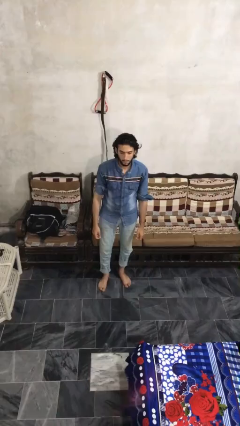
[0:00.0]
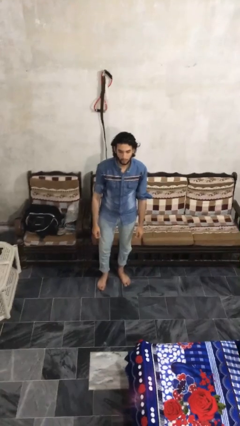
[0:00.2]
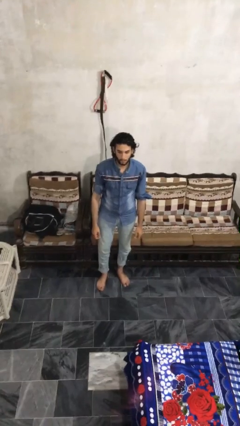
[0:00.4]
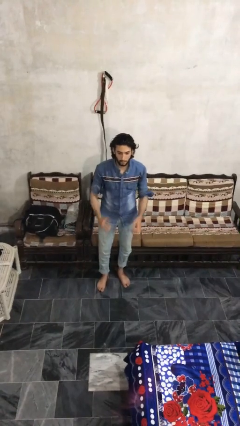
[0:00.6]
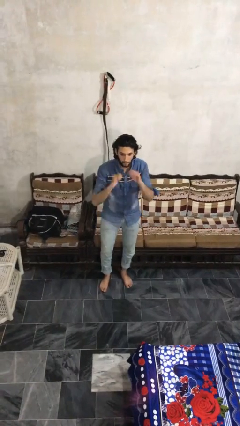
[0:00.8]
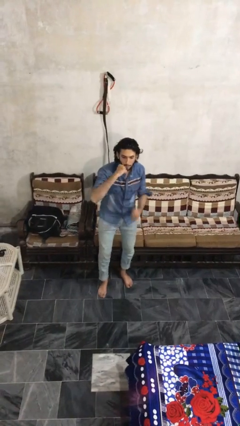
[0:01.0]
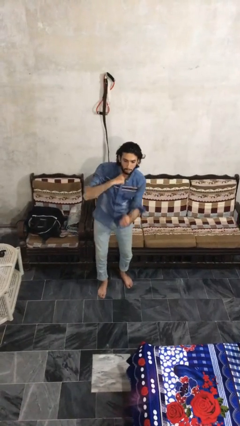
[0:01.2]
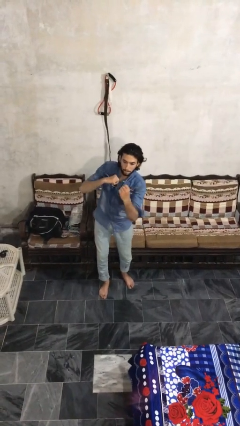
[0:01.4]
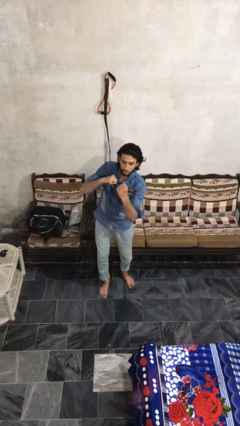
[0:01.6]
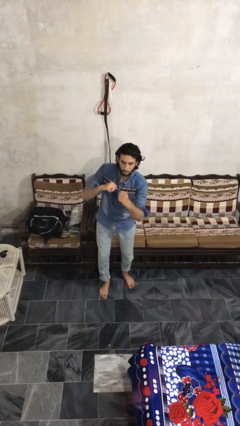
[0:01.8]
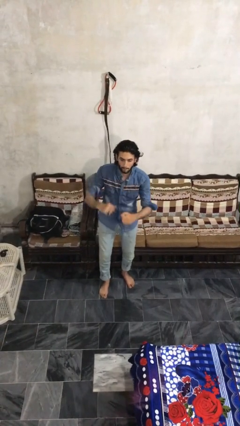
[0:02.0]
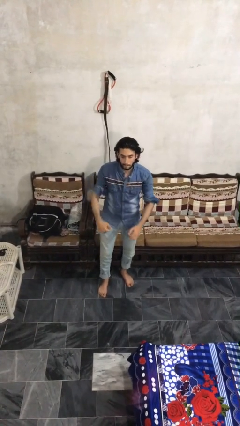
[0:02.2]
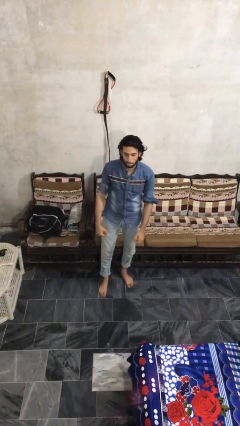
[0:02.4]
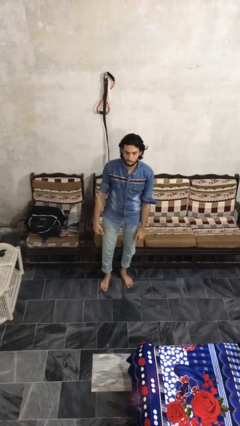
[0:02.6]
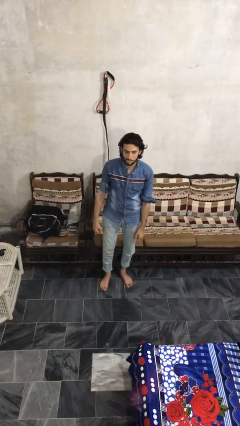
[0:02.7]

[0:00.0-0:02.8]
person punches

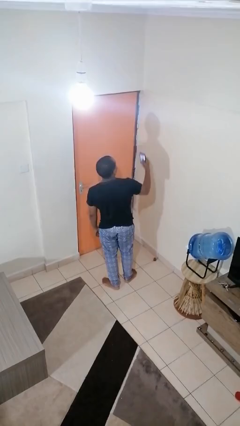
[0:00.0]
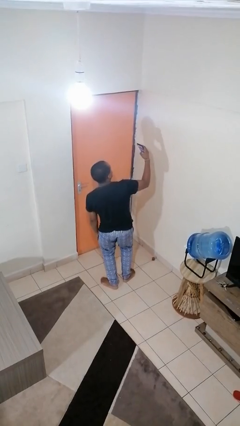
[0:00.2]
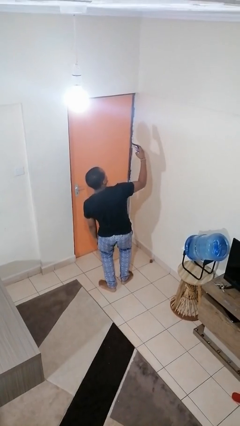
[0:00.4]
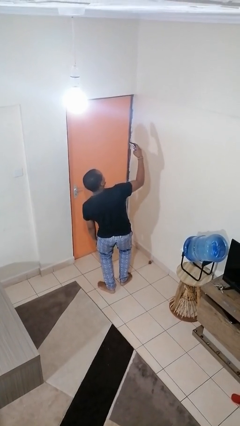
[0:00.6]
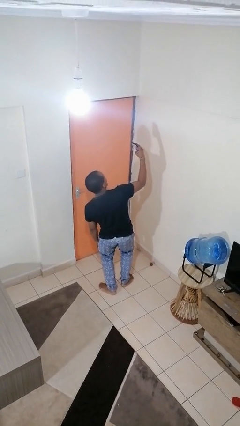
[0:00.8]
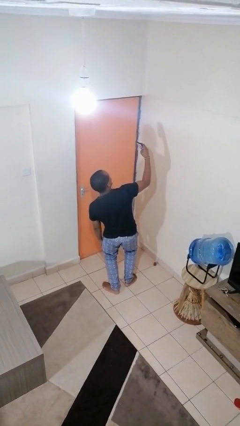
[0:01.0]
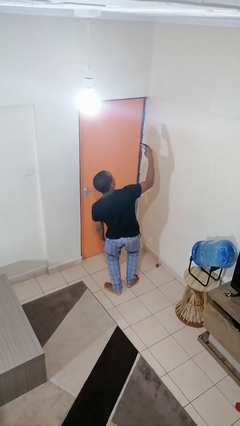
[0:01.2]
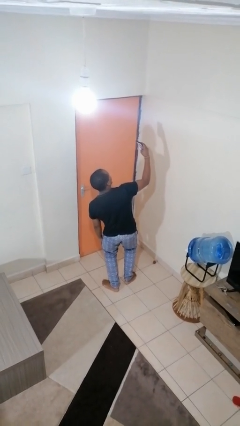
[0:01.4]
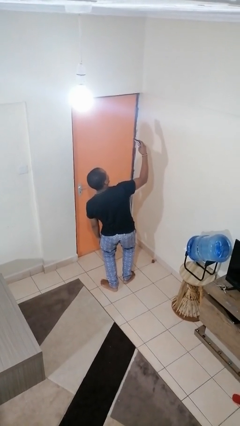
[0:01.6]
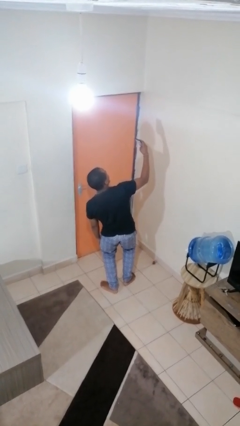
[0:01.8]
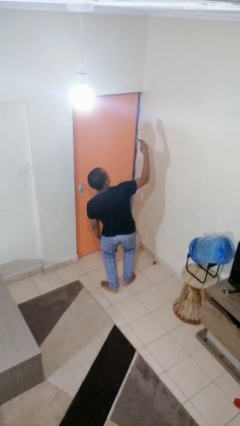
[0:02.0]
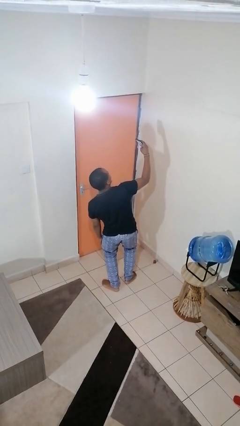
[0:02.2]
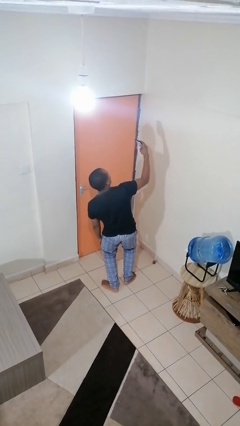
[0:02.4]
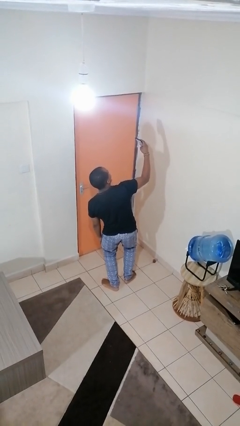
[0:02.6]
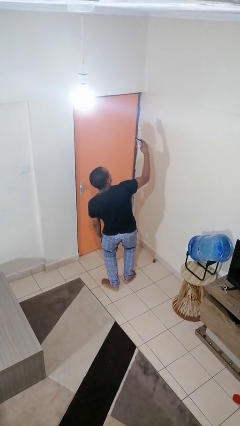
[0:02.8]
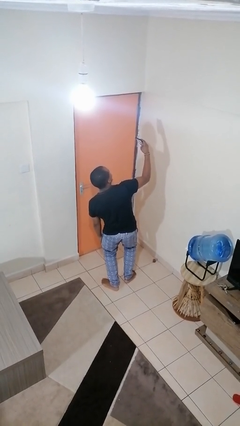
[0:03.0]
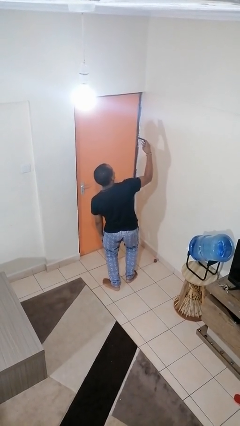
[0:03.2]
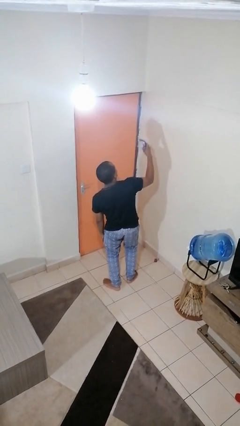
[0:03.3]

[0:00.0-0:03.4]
person takes selfie

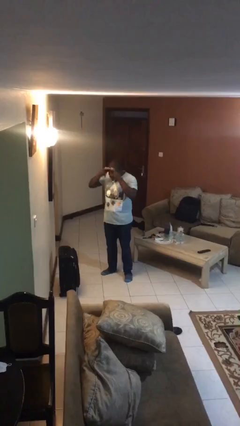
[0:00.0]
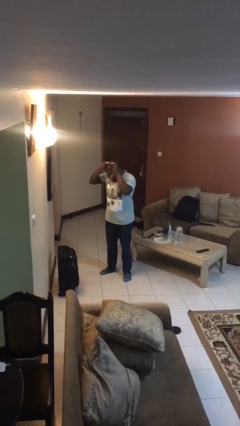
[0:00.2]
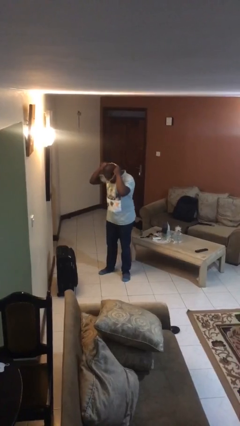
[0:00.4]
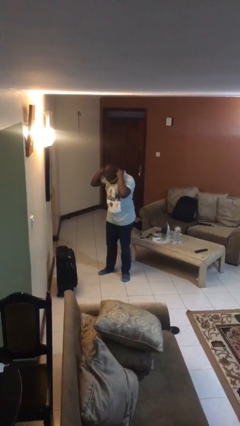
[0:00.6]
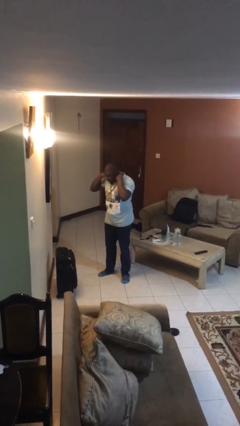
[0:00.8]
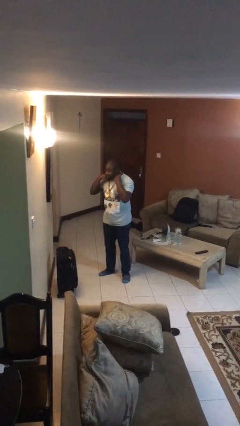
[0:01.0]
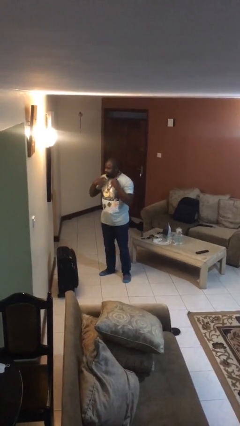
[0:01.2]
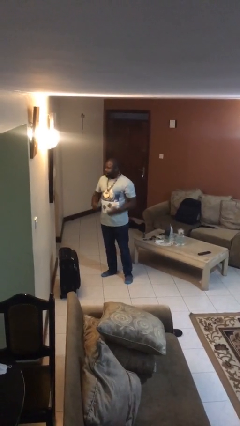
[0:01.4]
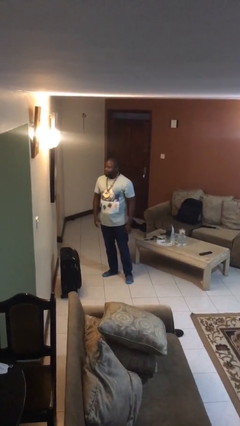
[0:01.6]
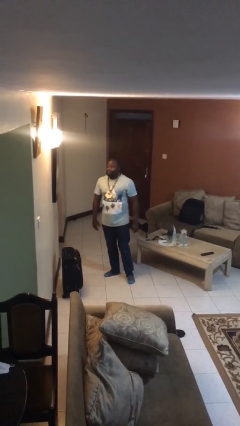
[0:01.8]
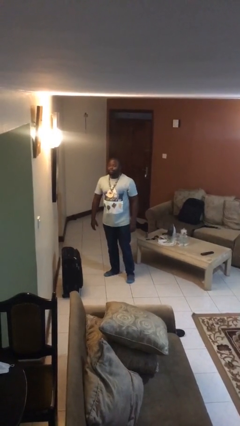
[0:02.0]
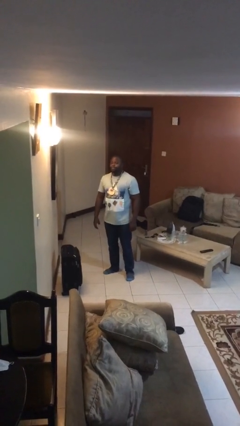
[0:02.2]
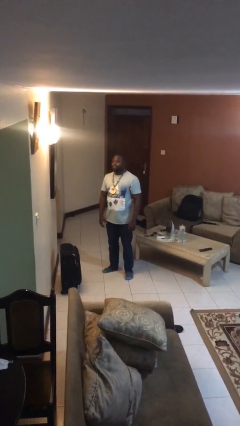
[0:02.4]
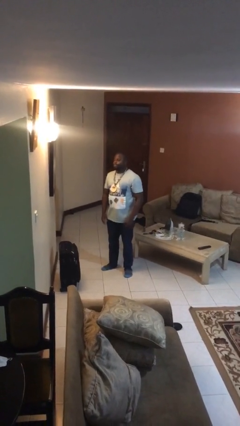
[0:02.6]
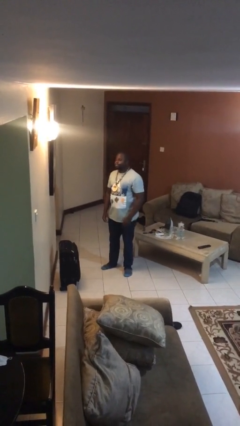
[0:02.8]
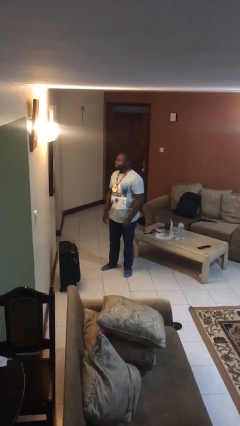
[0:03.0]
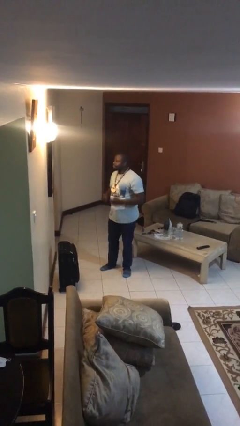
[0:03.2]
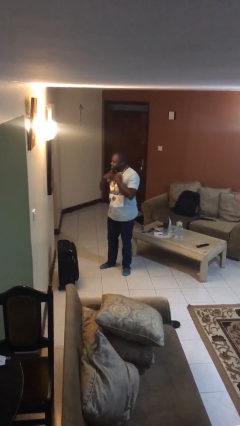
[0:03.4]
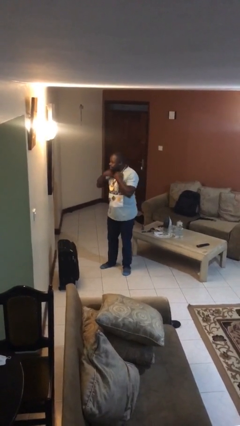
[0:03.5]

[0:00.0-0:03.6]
person puts on necklace

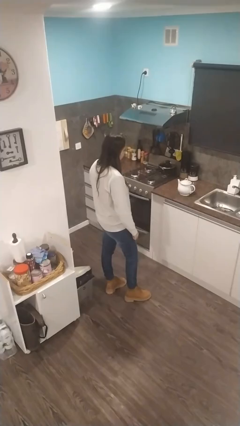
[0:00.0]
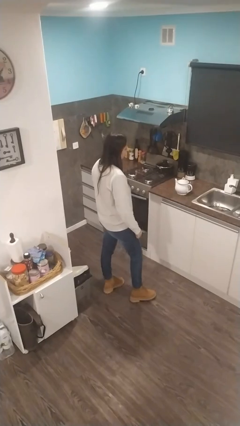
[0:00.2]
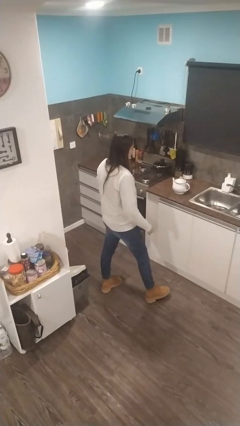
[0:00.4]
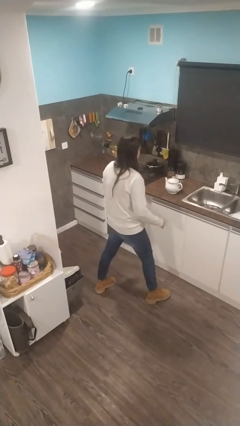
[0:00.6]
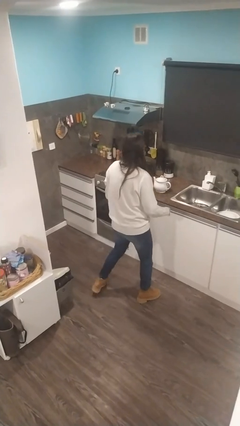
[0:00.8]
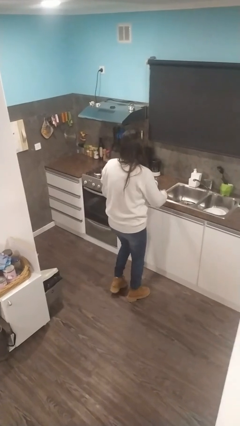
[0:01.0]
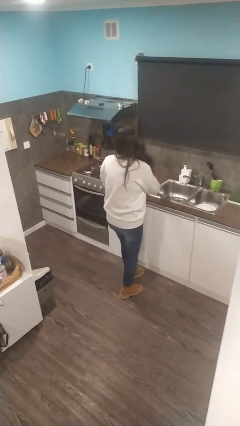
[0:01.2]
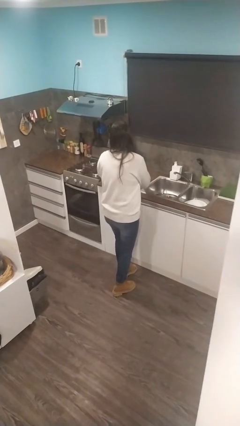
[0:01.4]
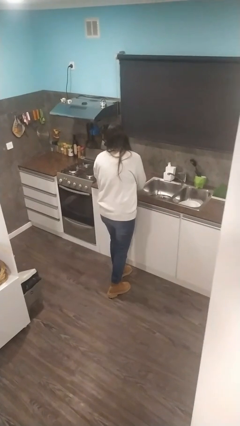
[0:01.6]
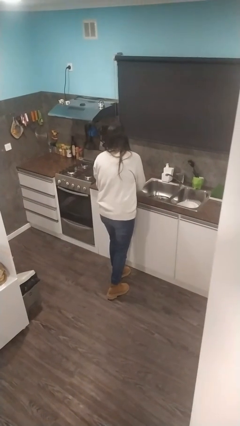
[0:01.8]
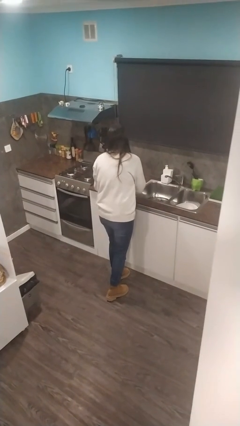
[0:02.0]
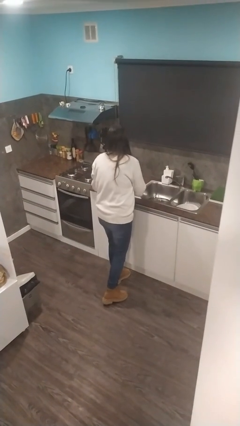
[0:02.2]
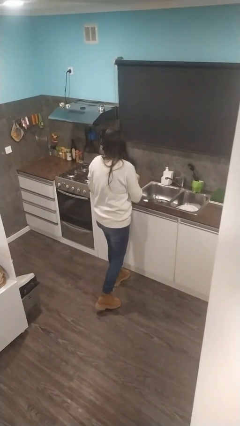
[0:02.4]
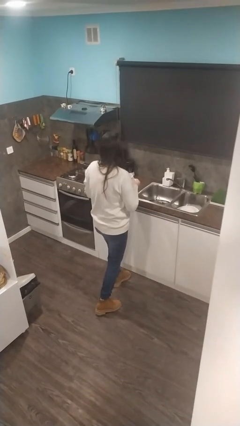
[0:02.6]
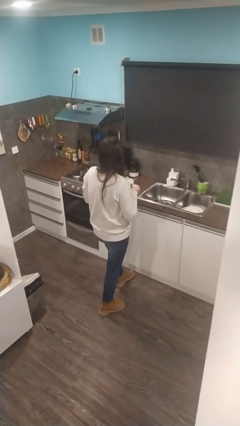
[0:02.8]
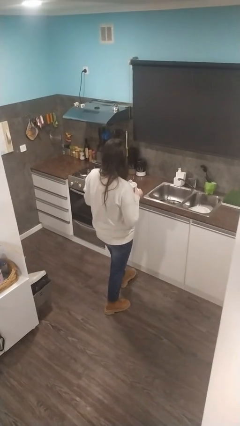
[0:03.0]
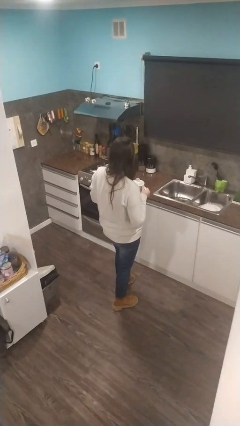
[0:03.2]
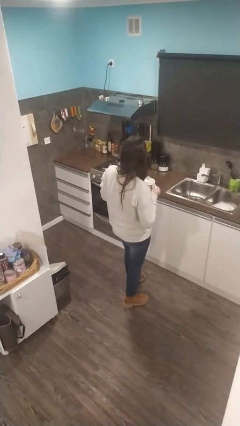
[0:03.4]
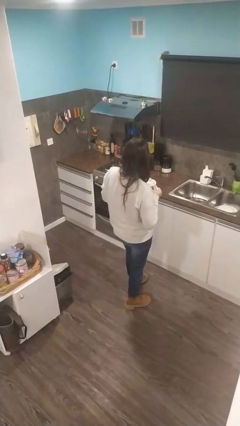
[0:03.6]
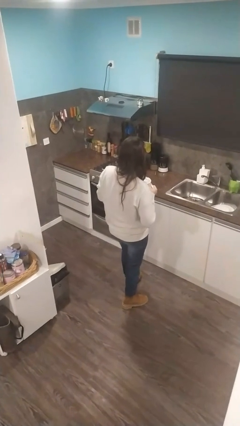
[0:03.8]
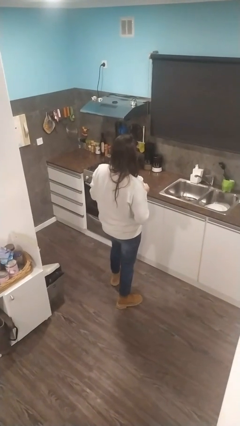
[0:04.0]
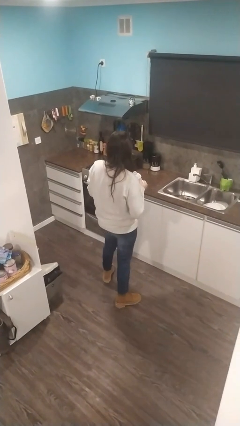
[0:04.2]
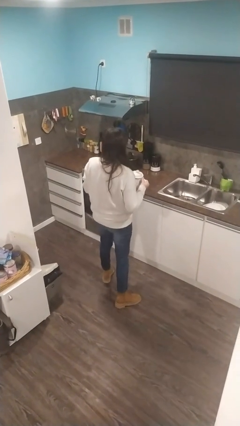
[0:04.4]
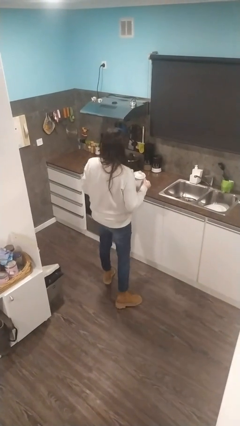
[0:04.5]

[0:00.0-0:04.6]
person picks up object from countertop

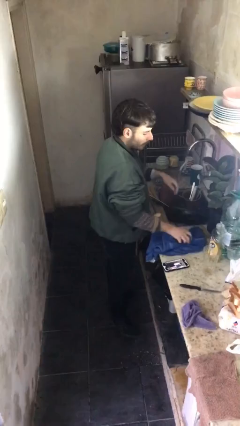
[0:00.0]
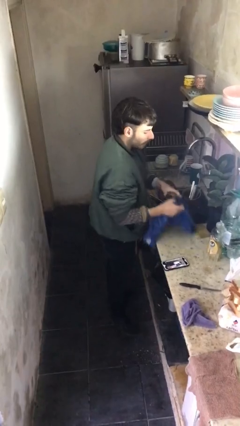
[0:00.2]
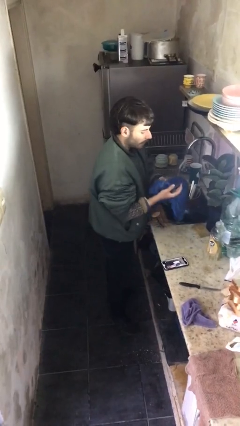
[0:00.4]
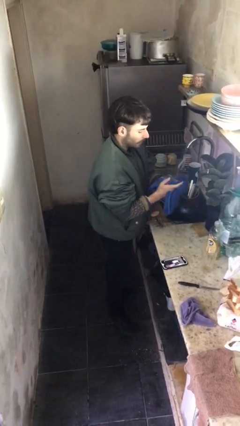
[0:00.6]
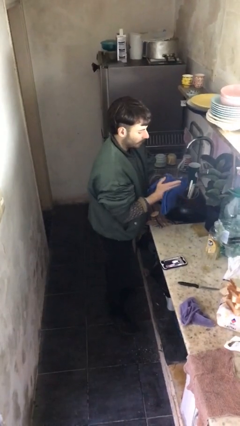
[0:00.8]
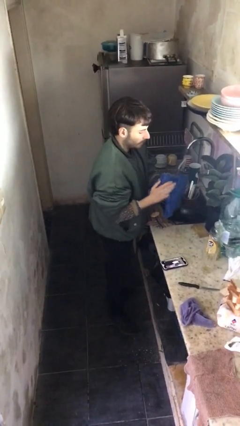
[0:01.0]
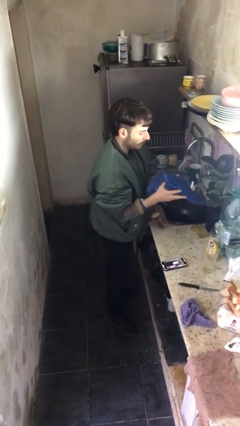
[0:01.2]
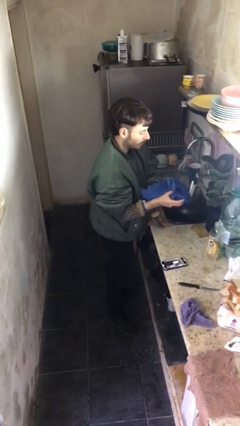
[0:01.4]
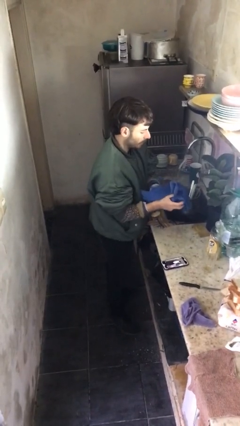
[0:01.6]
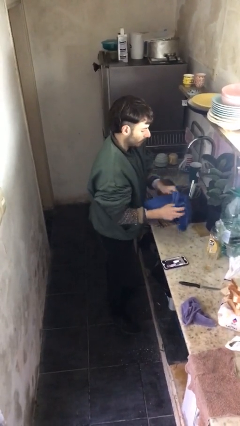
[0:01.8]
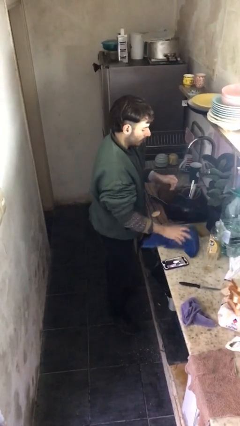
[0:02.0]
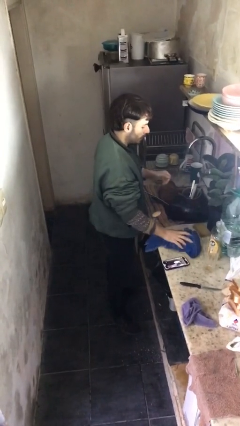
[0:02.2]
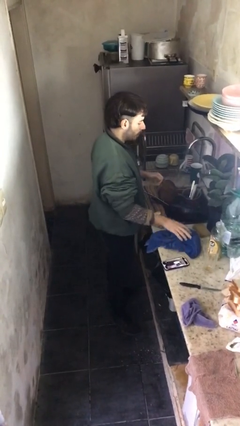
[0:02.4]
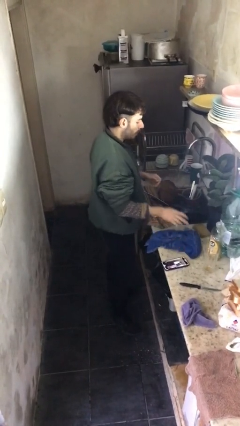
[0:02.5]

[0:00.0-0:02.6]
person dries hands with towel
